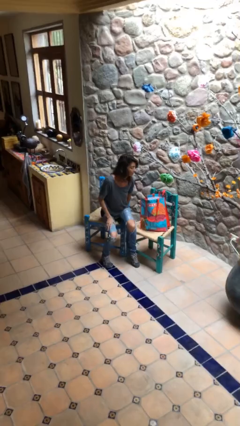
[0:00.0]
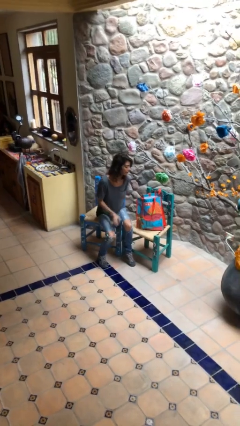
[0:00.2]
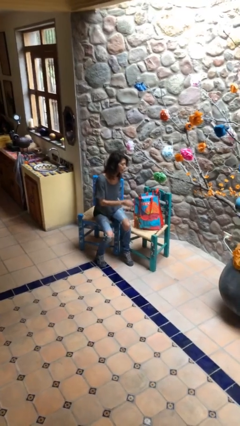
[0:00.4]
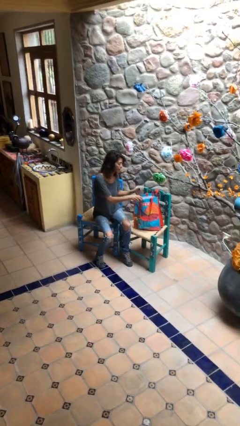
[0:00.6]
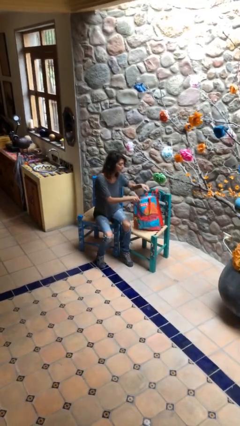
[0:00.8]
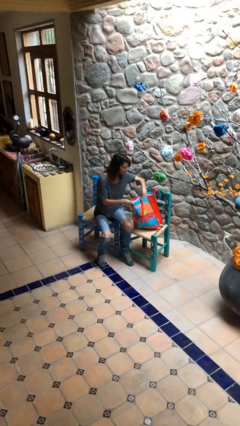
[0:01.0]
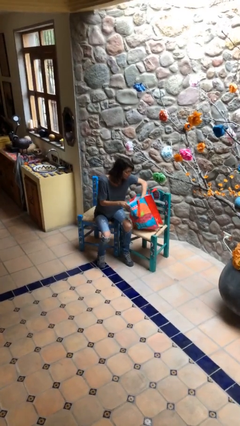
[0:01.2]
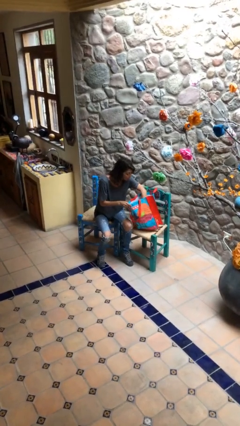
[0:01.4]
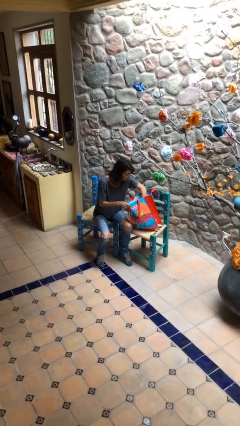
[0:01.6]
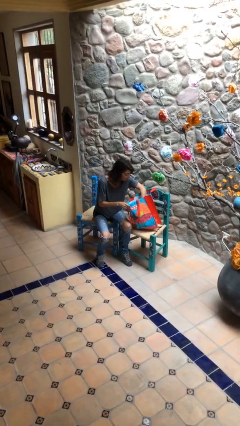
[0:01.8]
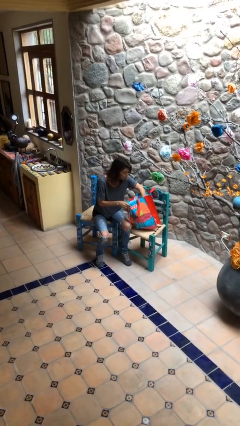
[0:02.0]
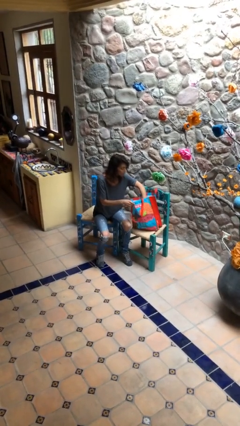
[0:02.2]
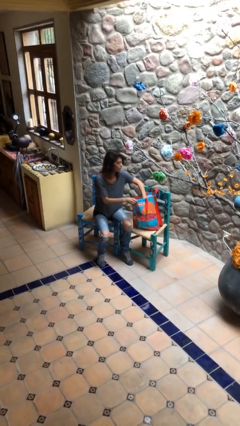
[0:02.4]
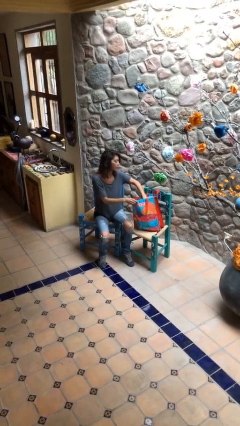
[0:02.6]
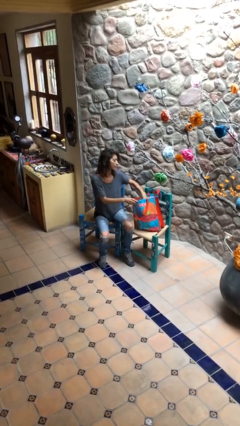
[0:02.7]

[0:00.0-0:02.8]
person searches in bag

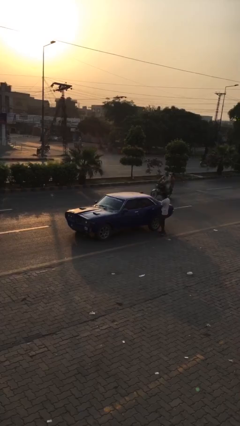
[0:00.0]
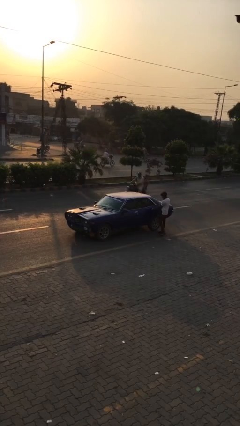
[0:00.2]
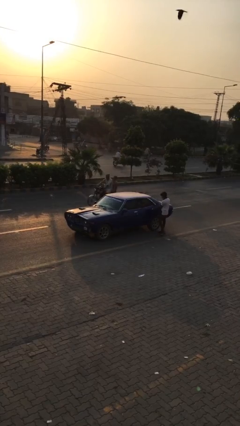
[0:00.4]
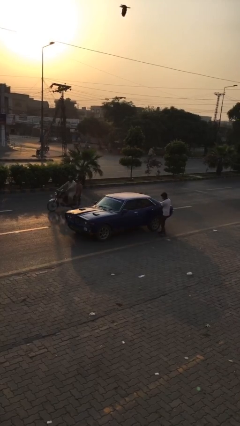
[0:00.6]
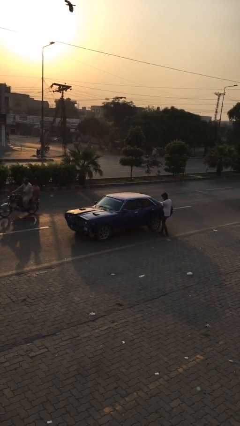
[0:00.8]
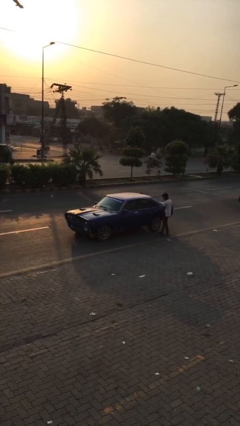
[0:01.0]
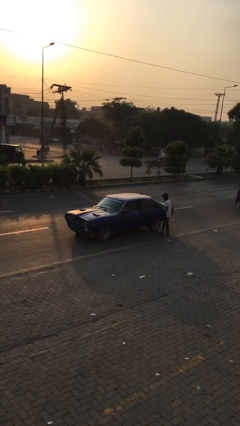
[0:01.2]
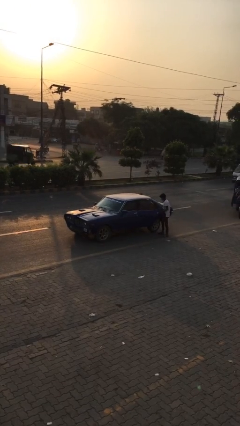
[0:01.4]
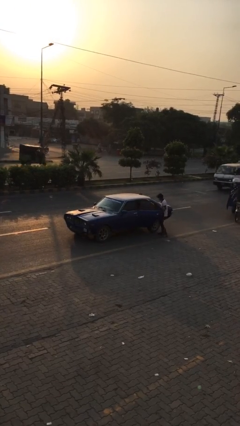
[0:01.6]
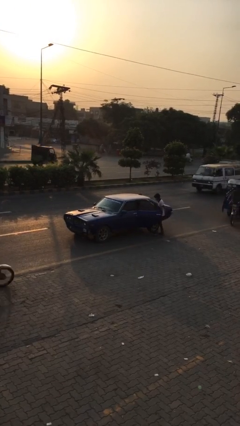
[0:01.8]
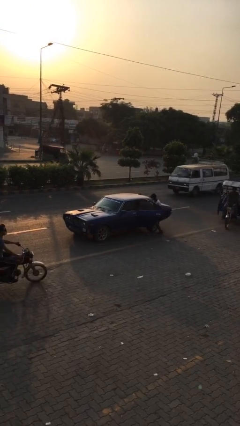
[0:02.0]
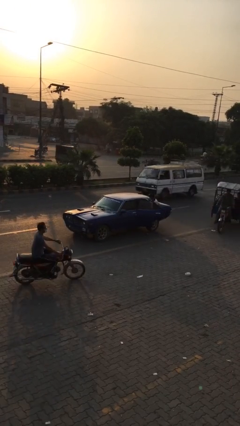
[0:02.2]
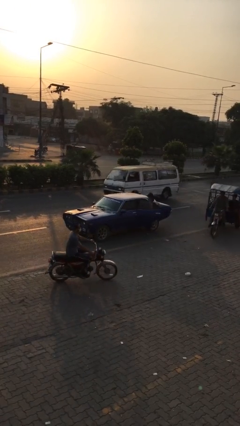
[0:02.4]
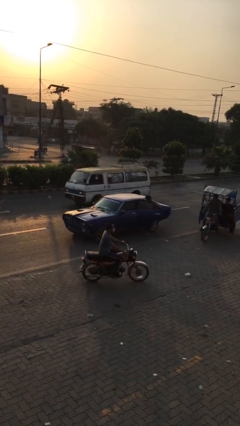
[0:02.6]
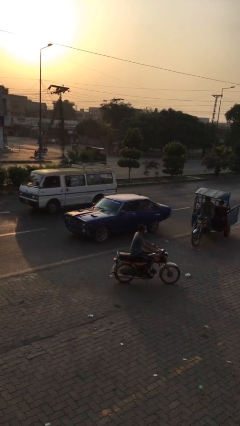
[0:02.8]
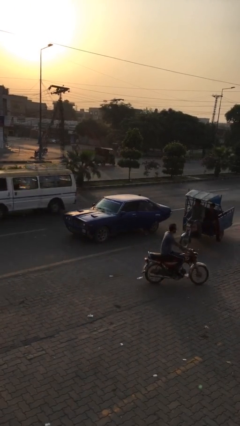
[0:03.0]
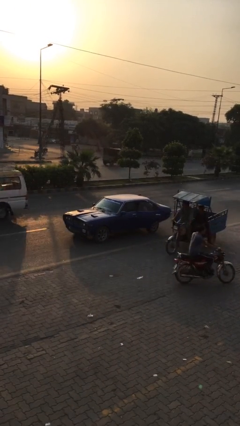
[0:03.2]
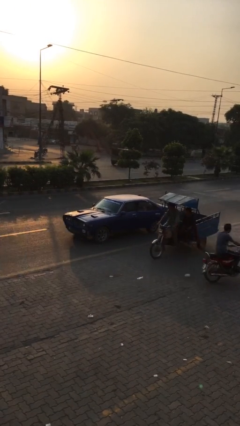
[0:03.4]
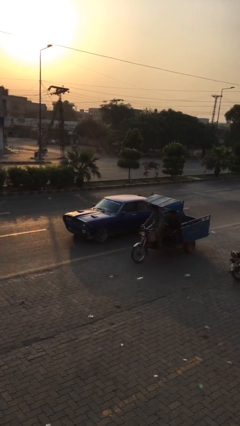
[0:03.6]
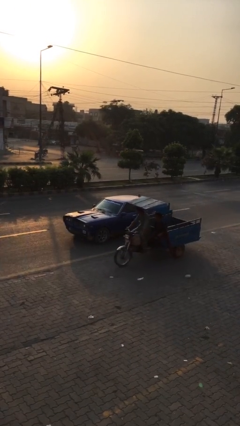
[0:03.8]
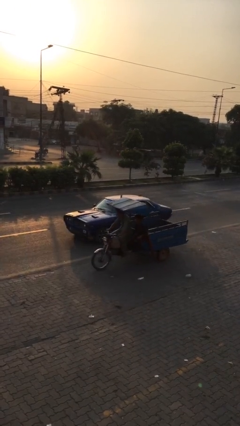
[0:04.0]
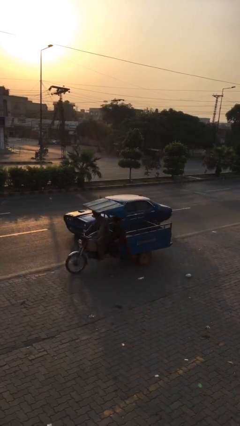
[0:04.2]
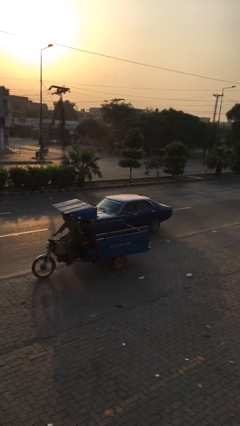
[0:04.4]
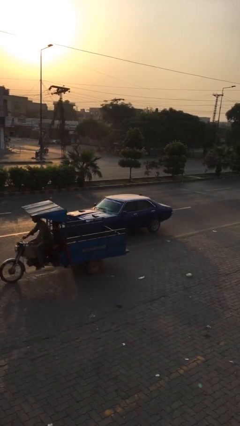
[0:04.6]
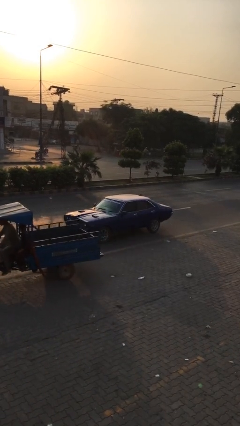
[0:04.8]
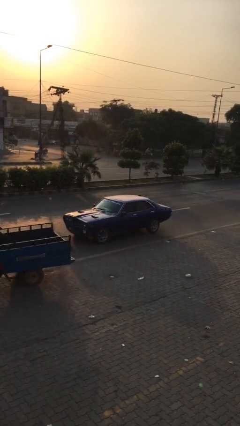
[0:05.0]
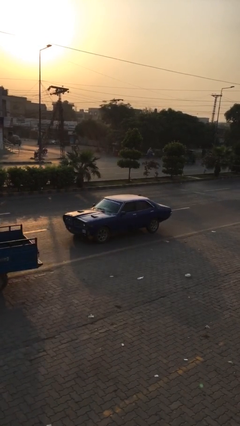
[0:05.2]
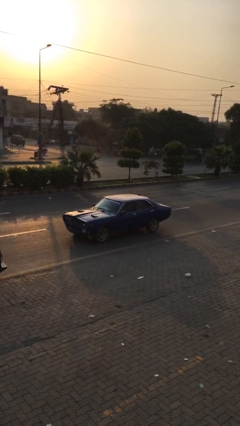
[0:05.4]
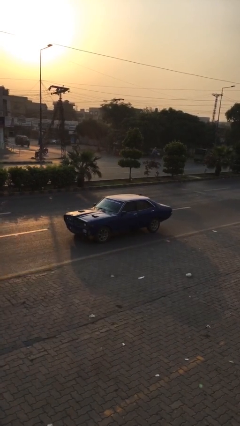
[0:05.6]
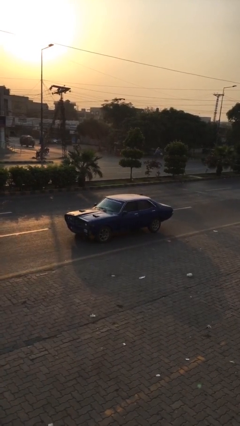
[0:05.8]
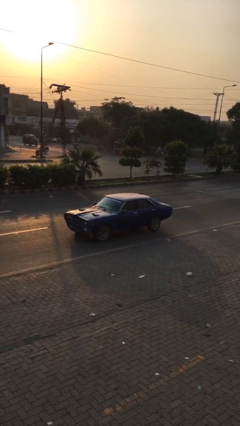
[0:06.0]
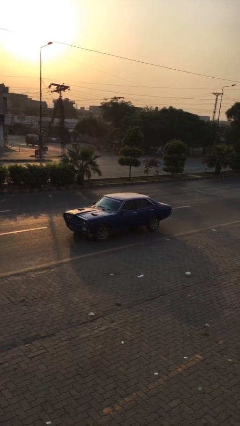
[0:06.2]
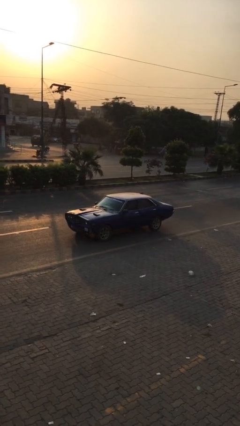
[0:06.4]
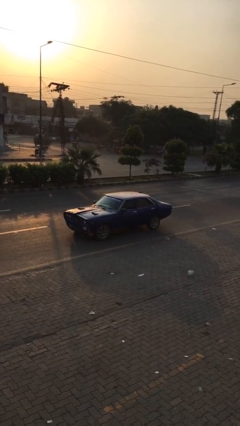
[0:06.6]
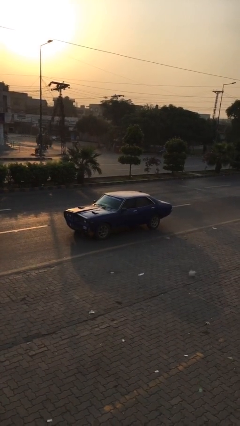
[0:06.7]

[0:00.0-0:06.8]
car picks up person

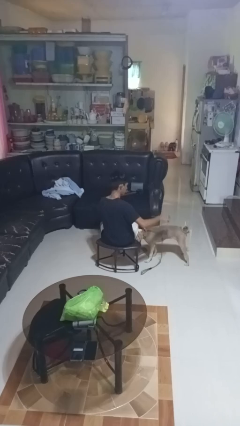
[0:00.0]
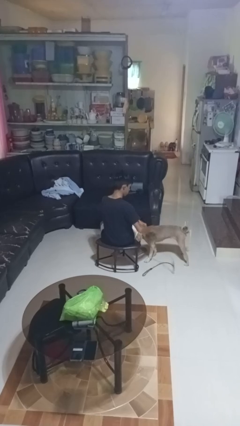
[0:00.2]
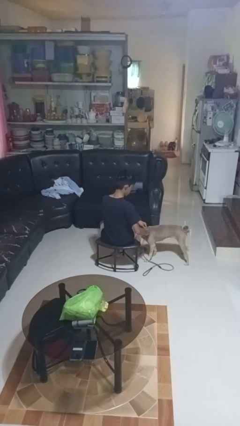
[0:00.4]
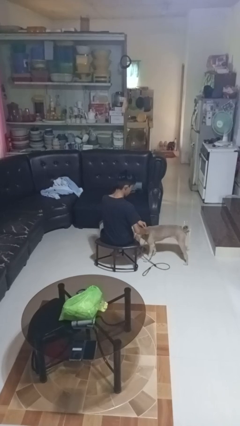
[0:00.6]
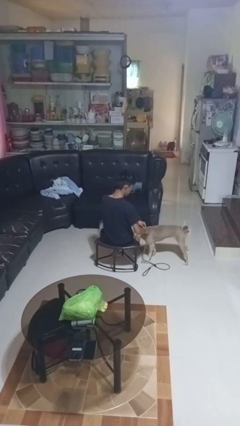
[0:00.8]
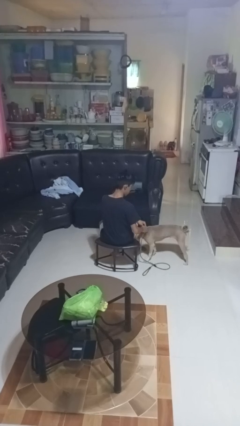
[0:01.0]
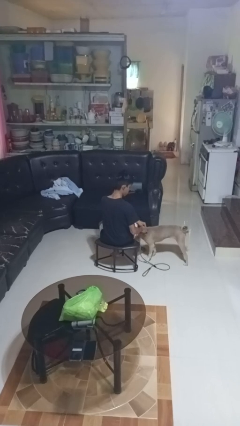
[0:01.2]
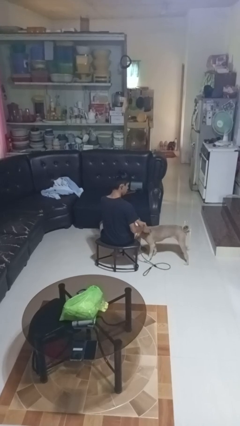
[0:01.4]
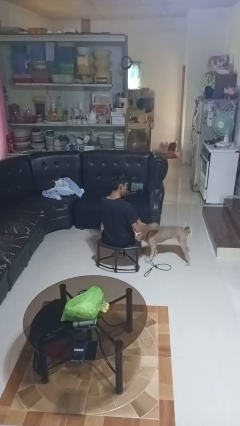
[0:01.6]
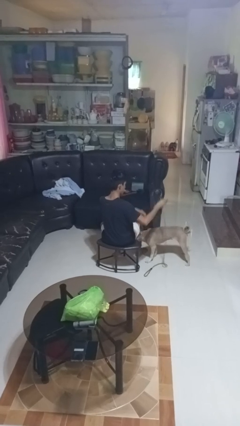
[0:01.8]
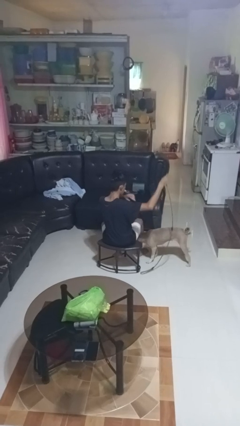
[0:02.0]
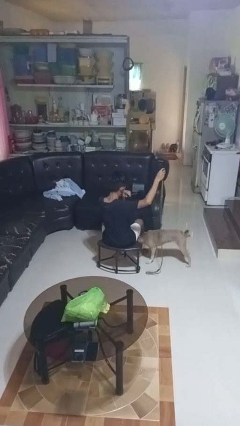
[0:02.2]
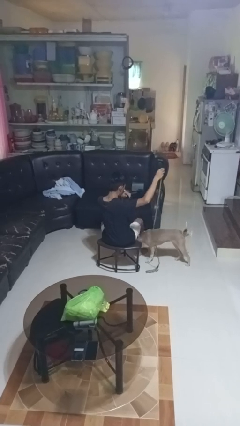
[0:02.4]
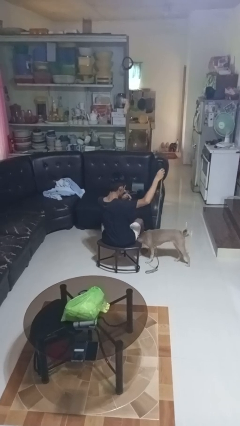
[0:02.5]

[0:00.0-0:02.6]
person unattaches leash from dog

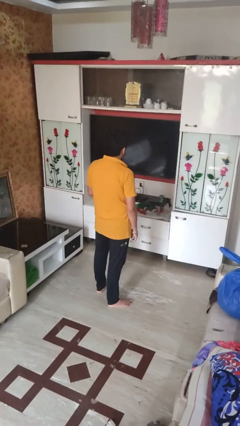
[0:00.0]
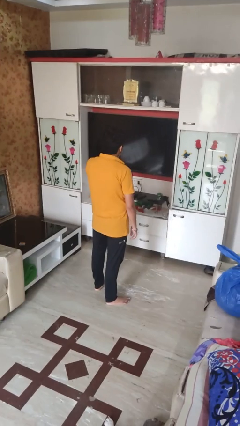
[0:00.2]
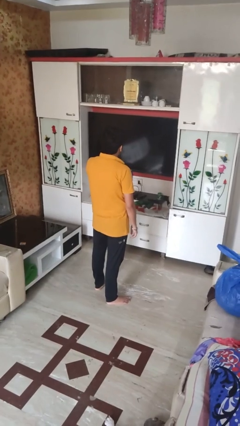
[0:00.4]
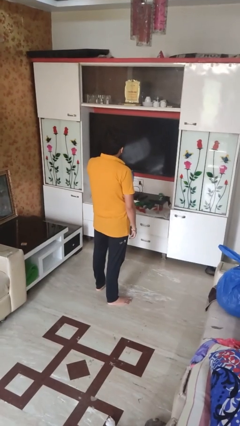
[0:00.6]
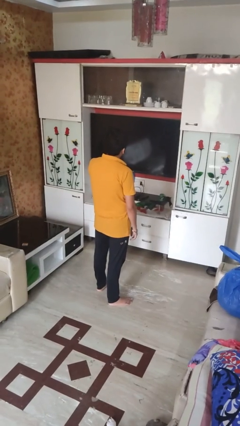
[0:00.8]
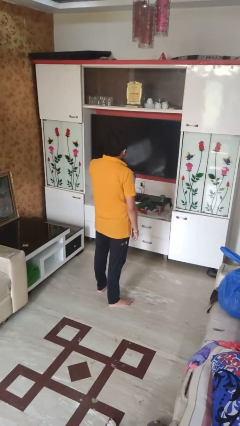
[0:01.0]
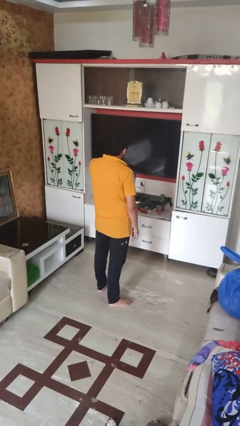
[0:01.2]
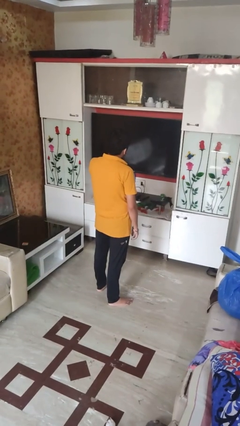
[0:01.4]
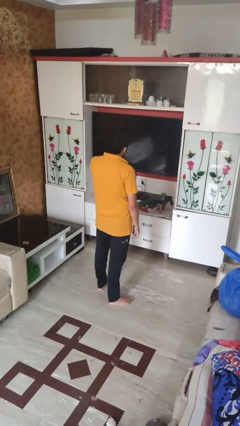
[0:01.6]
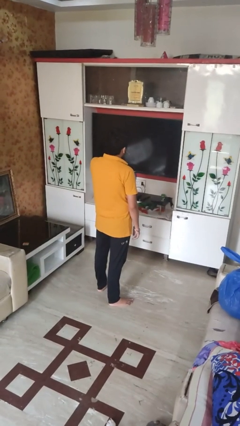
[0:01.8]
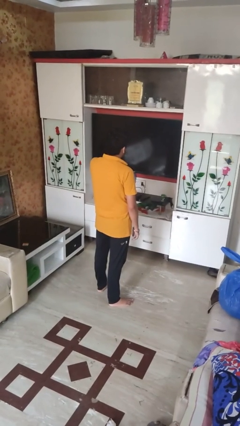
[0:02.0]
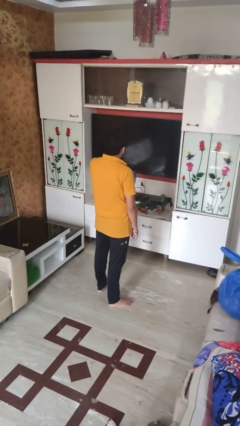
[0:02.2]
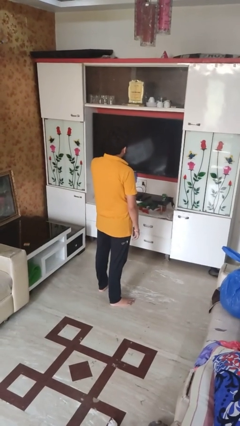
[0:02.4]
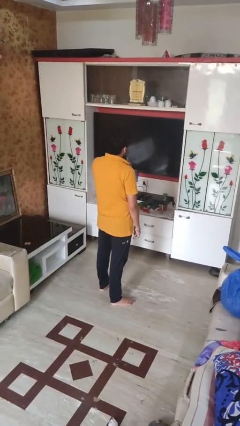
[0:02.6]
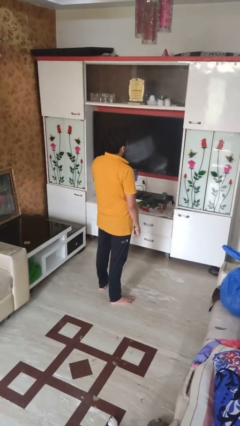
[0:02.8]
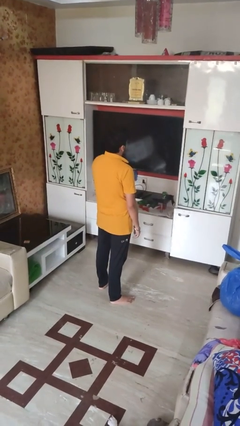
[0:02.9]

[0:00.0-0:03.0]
person licks fingers

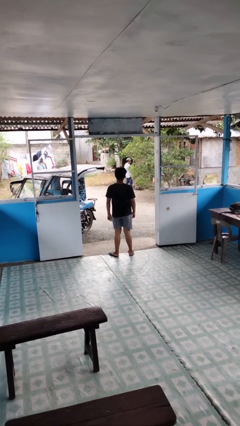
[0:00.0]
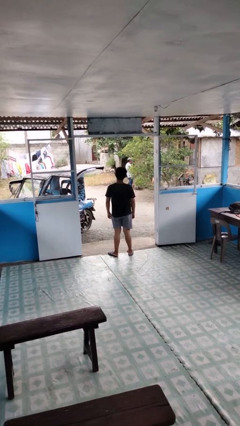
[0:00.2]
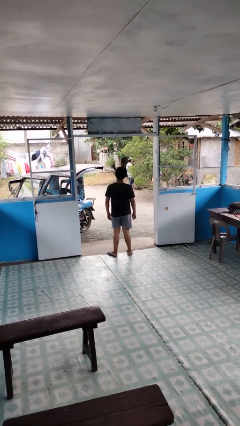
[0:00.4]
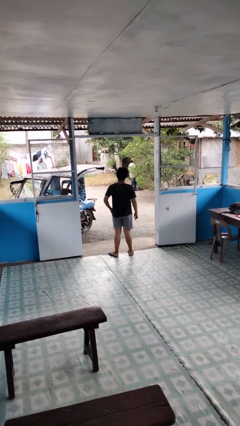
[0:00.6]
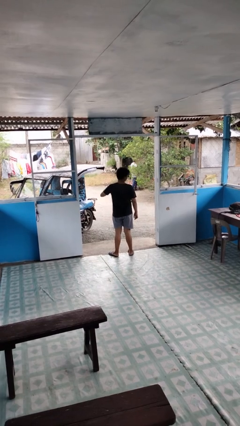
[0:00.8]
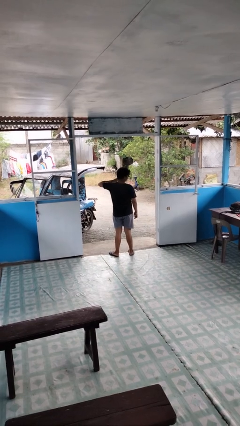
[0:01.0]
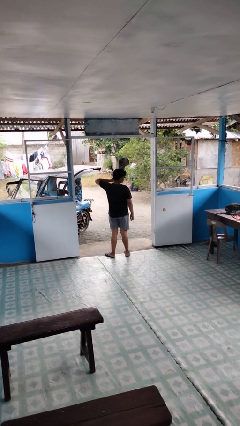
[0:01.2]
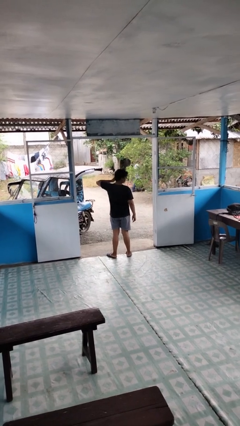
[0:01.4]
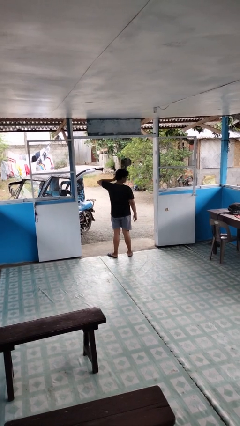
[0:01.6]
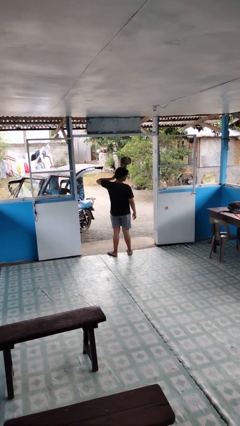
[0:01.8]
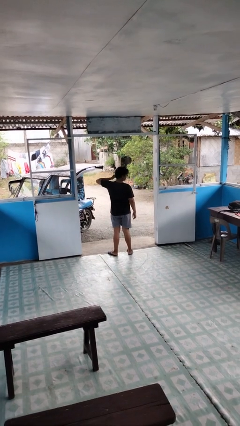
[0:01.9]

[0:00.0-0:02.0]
person touches earlobe

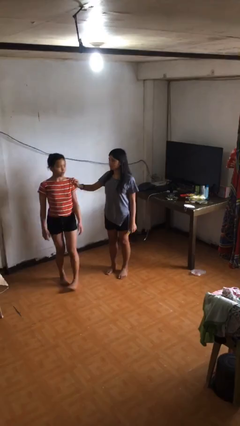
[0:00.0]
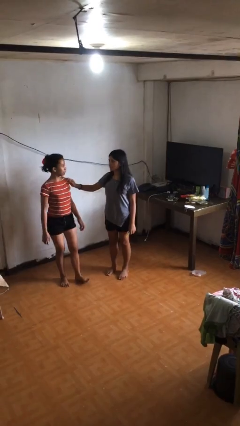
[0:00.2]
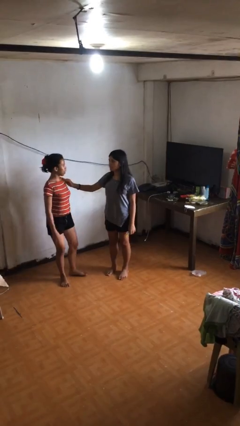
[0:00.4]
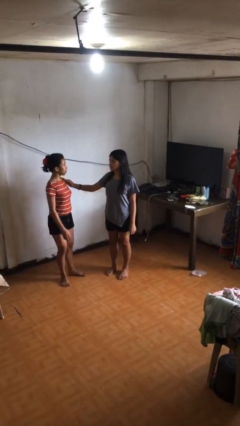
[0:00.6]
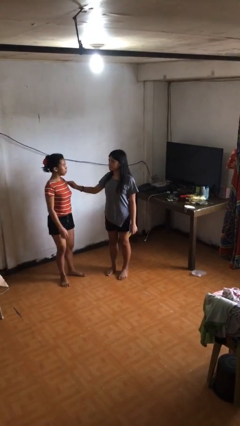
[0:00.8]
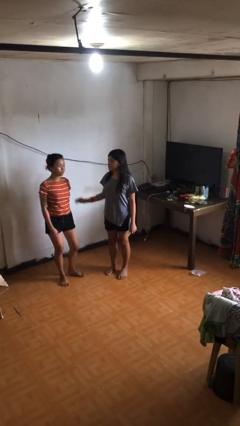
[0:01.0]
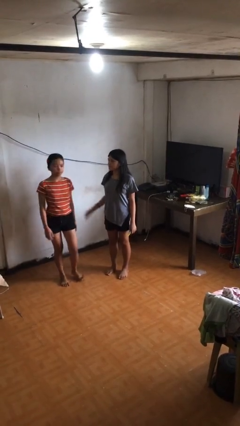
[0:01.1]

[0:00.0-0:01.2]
person spins person around
